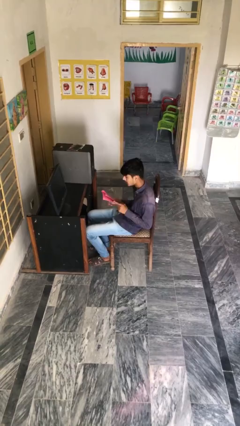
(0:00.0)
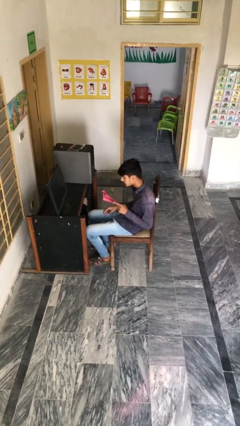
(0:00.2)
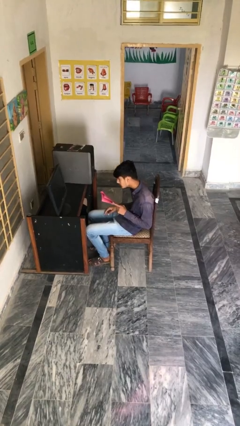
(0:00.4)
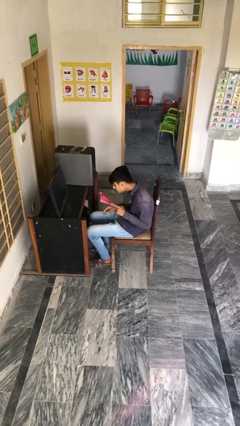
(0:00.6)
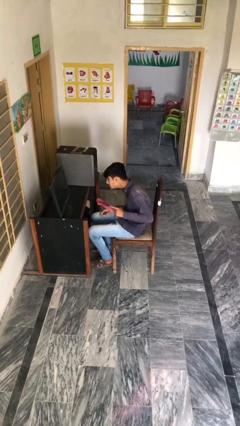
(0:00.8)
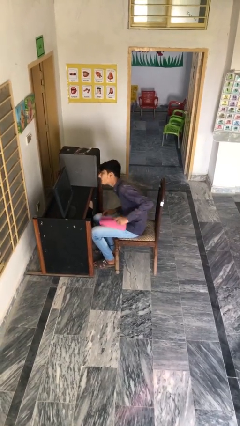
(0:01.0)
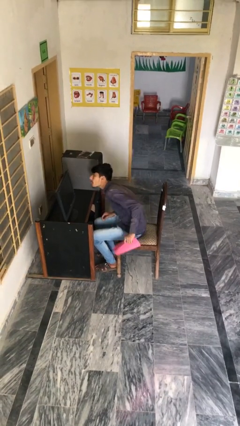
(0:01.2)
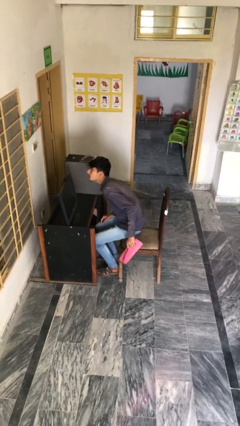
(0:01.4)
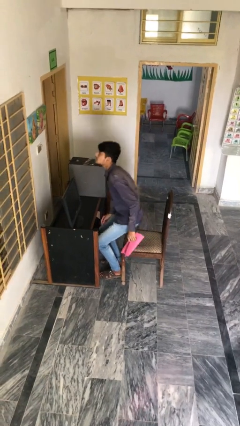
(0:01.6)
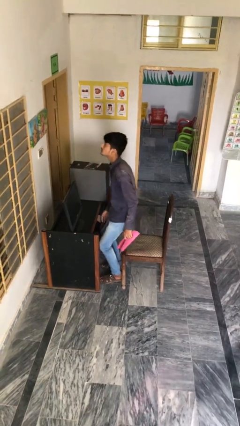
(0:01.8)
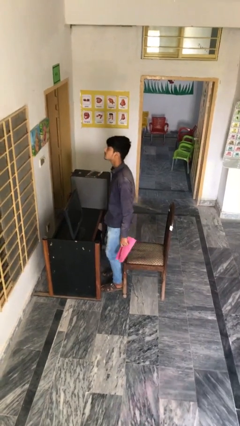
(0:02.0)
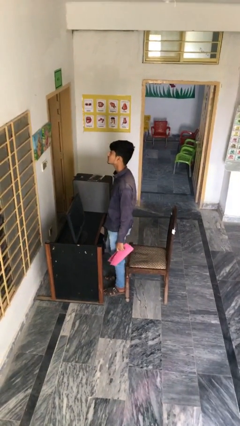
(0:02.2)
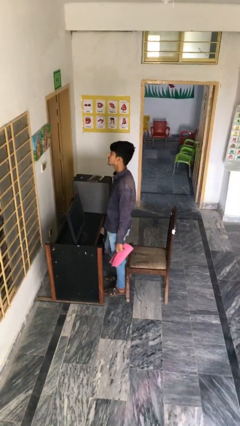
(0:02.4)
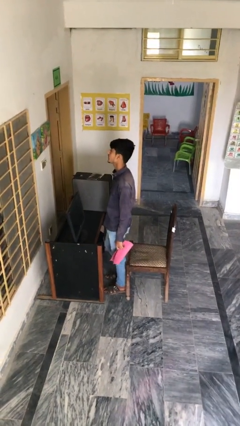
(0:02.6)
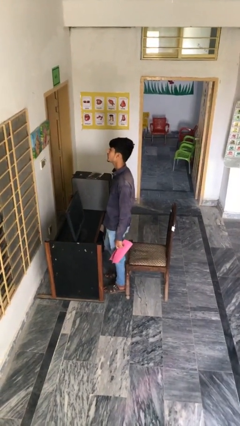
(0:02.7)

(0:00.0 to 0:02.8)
person stands up

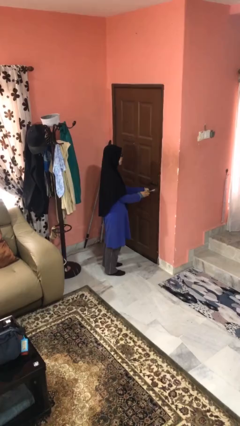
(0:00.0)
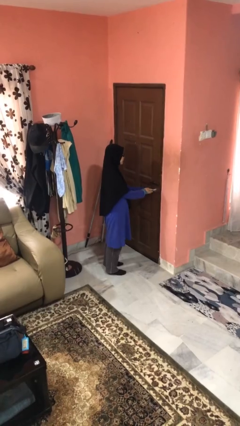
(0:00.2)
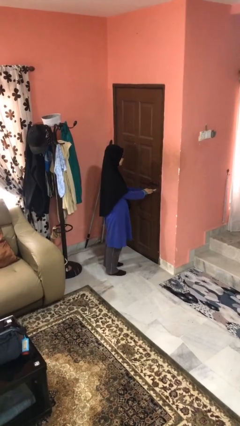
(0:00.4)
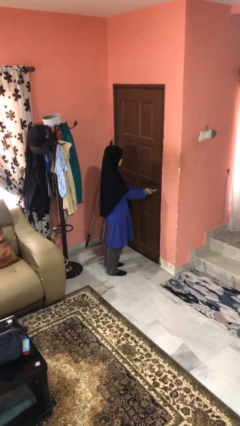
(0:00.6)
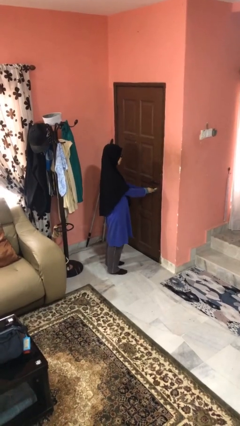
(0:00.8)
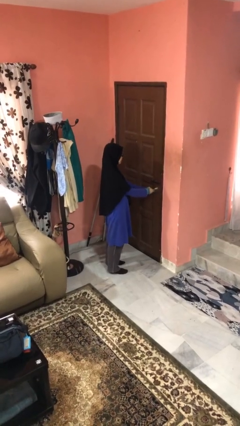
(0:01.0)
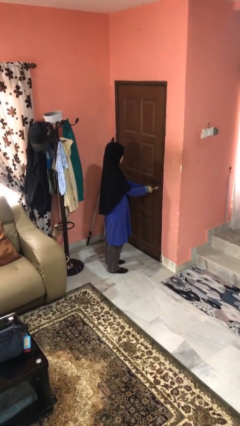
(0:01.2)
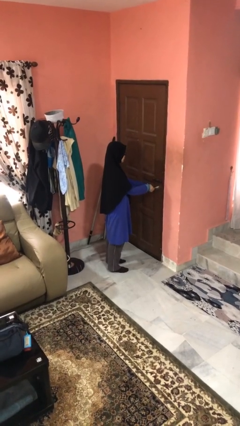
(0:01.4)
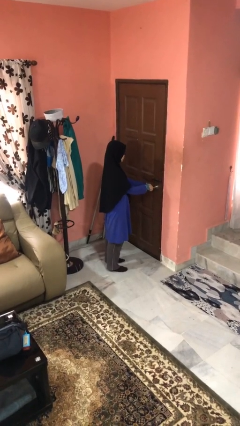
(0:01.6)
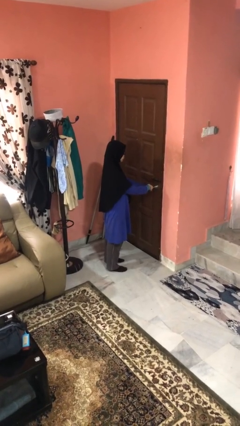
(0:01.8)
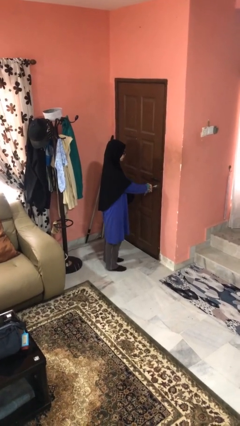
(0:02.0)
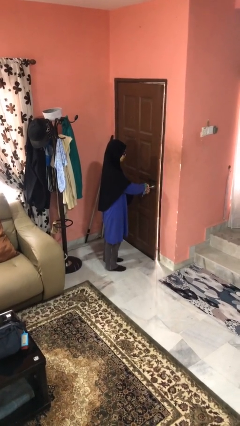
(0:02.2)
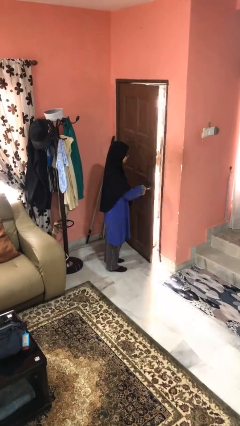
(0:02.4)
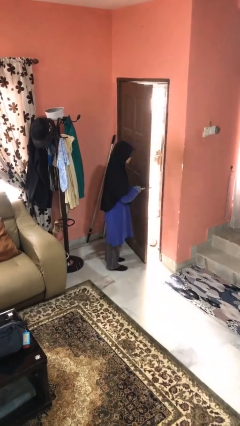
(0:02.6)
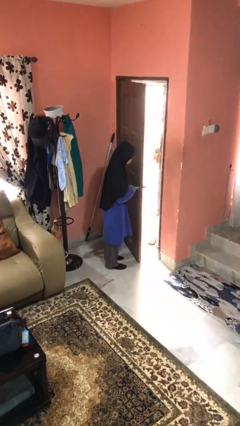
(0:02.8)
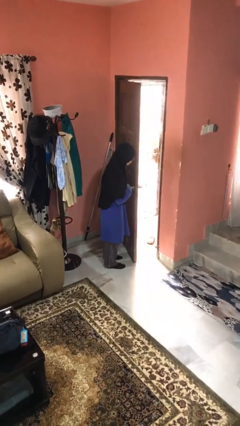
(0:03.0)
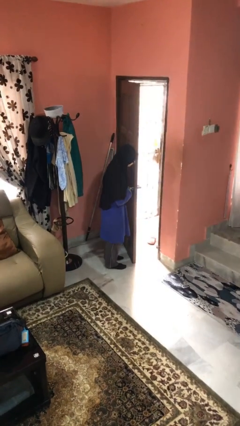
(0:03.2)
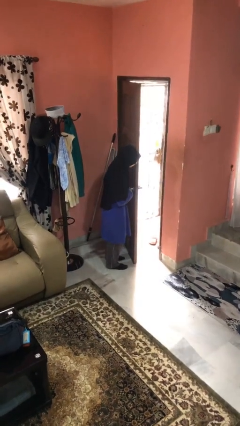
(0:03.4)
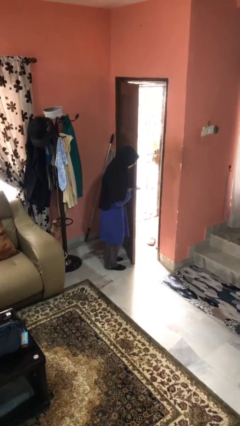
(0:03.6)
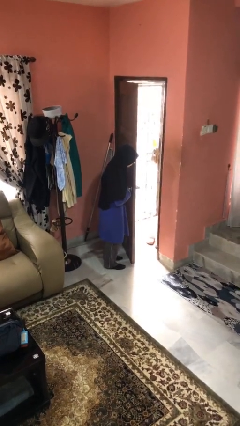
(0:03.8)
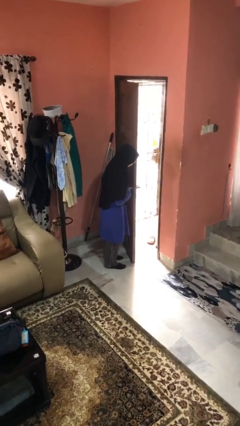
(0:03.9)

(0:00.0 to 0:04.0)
person opens facility door

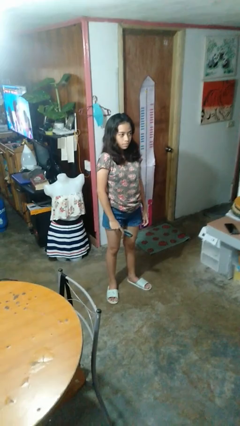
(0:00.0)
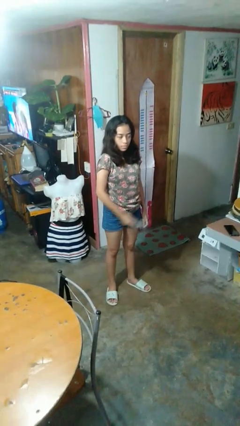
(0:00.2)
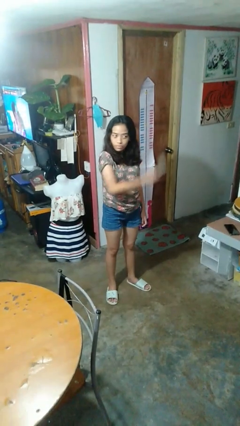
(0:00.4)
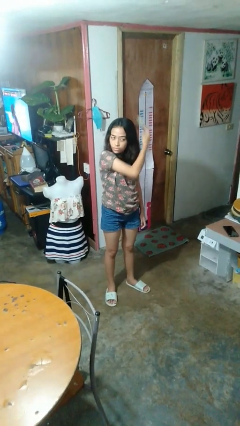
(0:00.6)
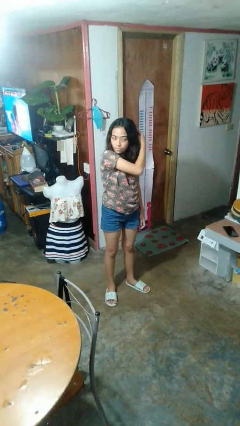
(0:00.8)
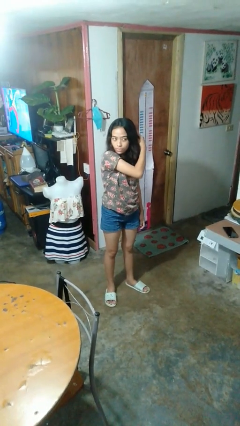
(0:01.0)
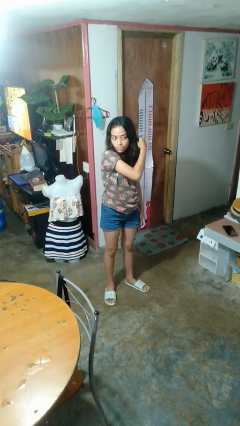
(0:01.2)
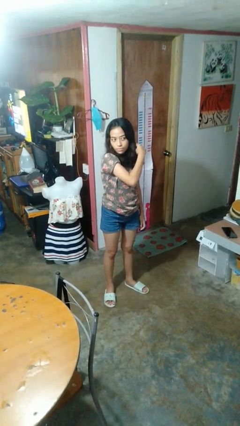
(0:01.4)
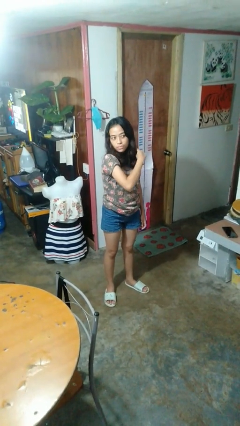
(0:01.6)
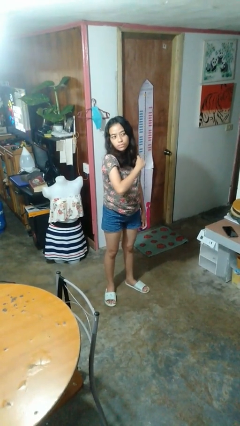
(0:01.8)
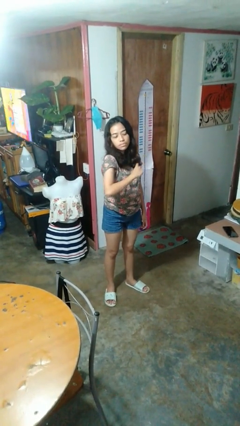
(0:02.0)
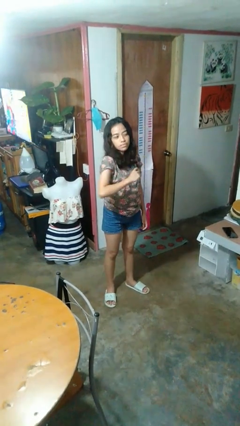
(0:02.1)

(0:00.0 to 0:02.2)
person brushes hair

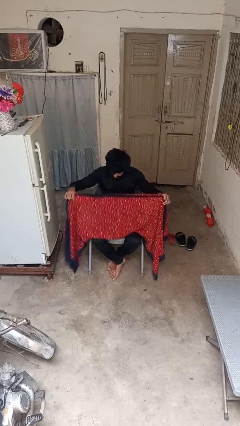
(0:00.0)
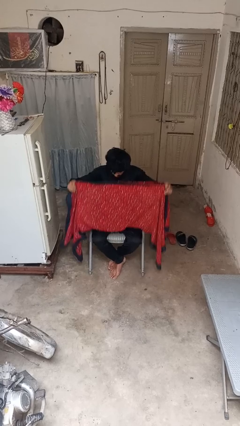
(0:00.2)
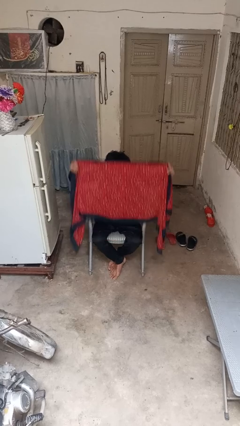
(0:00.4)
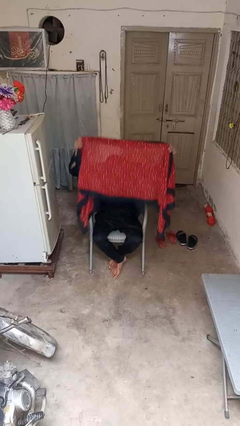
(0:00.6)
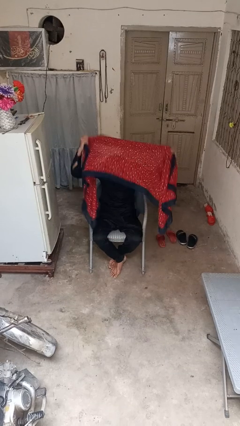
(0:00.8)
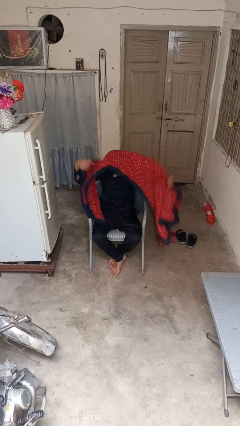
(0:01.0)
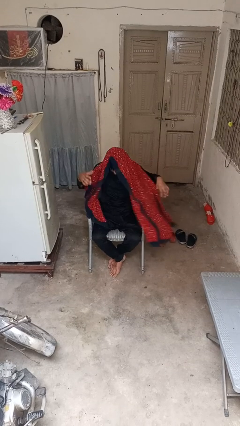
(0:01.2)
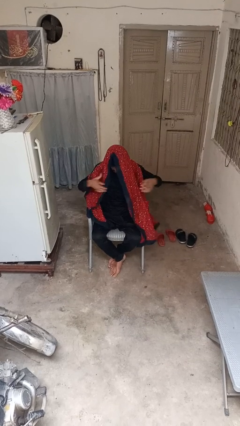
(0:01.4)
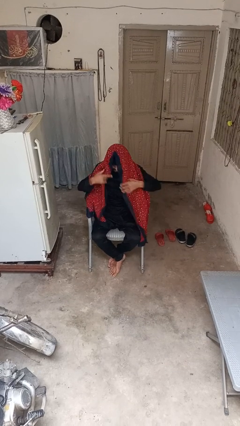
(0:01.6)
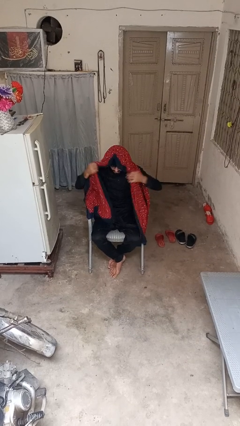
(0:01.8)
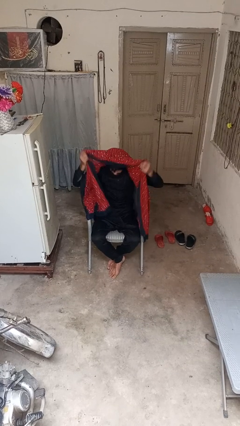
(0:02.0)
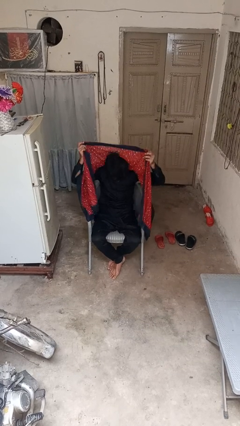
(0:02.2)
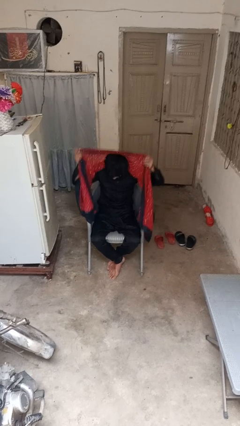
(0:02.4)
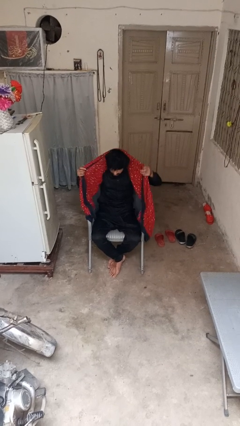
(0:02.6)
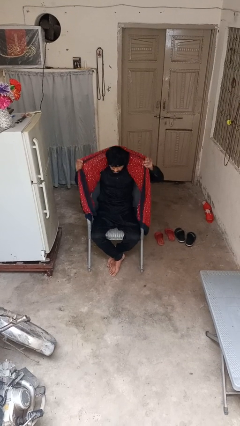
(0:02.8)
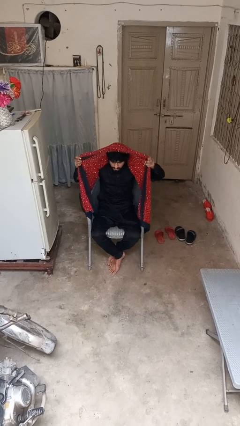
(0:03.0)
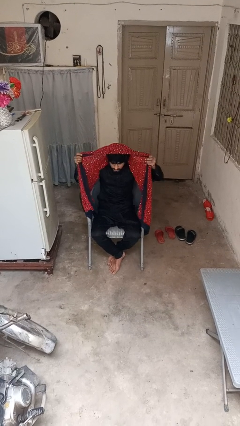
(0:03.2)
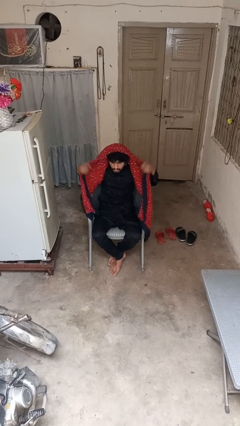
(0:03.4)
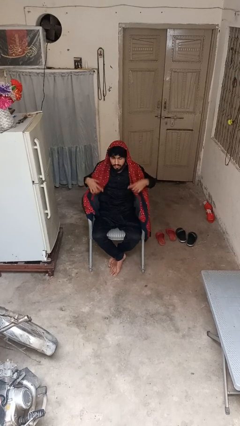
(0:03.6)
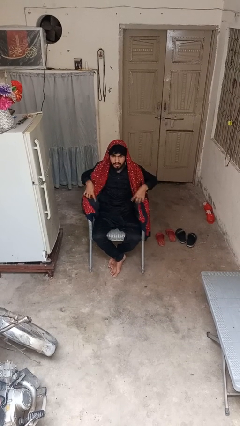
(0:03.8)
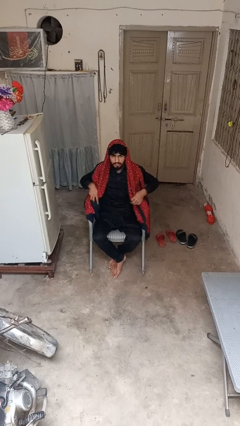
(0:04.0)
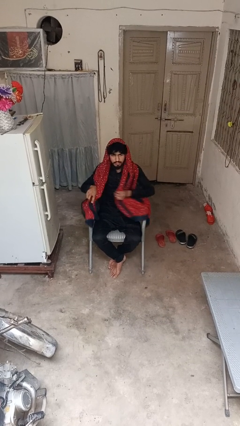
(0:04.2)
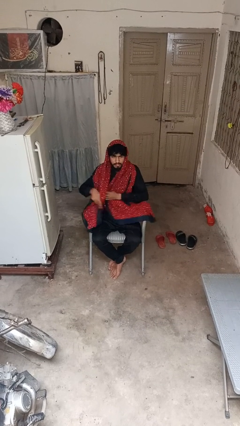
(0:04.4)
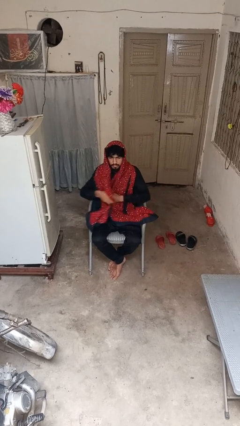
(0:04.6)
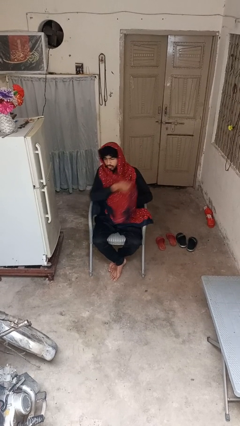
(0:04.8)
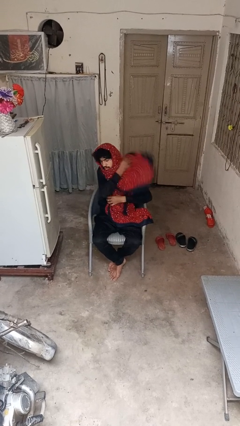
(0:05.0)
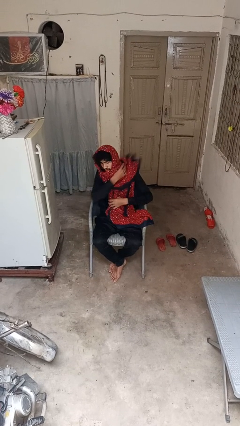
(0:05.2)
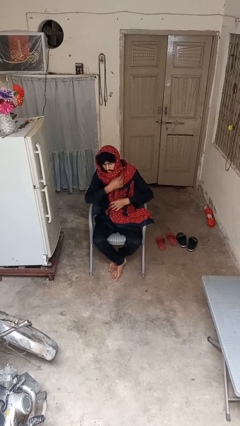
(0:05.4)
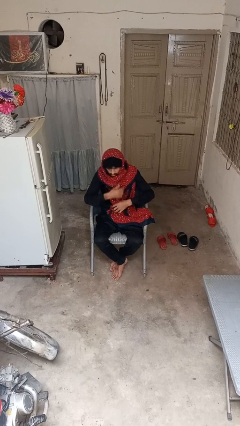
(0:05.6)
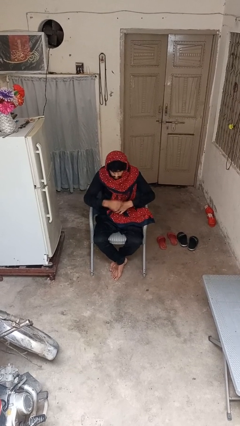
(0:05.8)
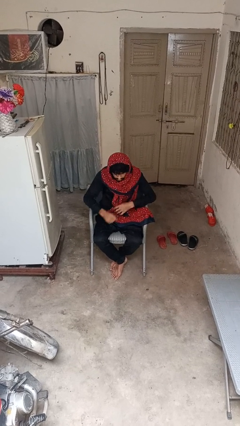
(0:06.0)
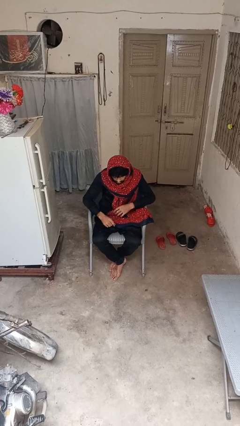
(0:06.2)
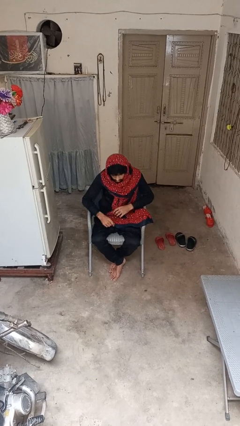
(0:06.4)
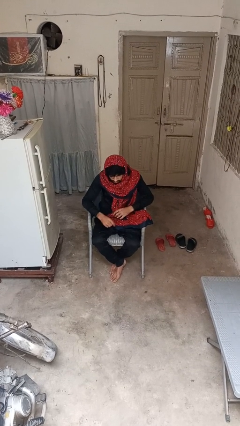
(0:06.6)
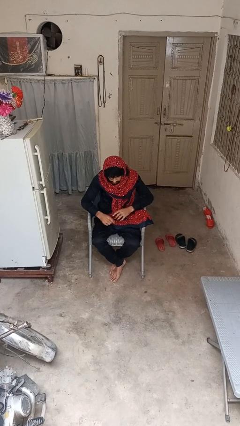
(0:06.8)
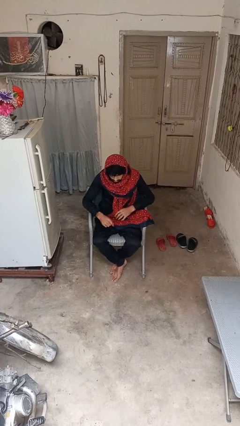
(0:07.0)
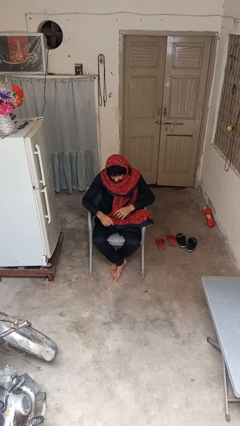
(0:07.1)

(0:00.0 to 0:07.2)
person puts on scarf

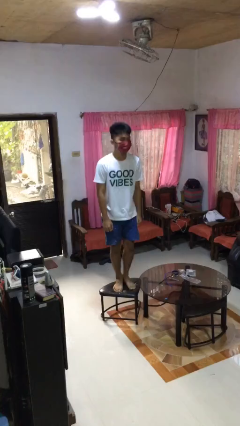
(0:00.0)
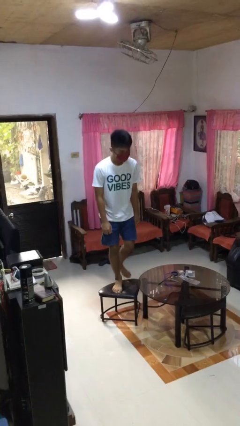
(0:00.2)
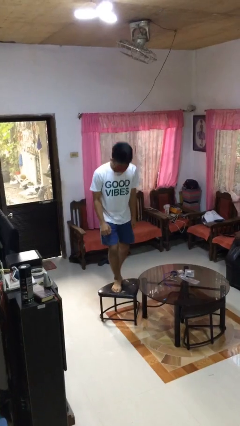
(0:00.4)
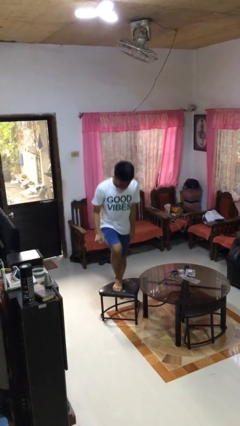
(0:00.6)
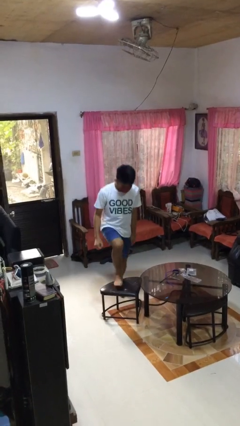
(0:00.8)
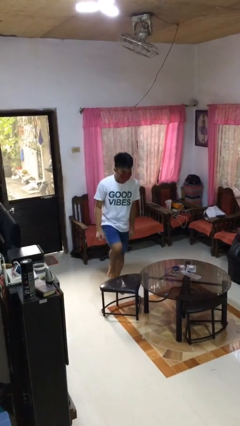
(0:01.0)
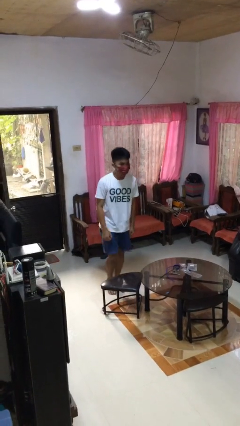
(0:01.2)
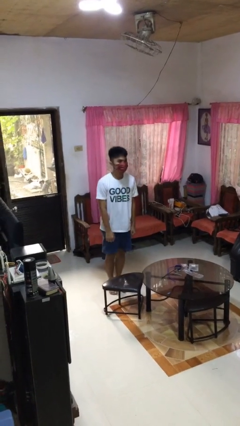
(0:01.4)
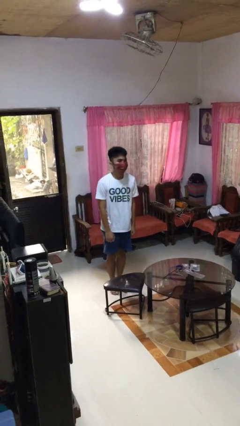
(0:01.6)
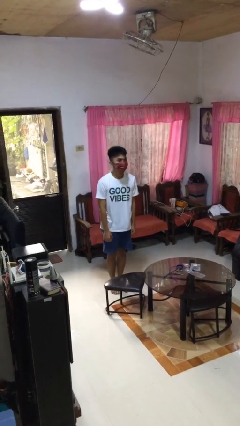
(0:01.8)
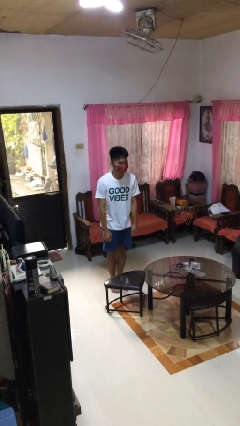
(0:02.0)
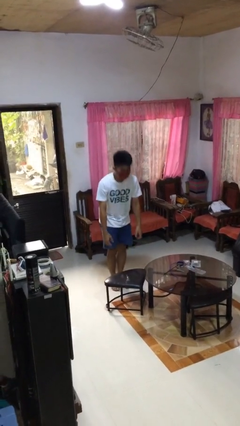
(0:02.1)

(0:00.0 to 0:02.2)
person climbs off chair
